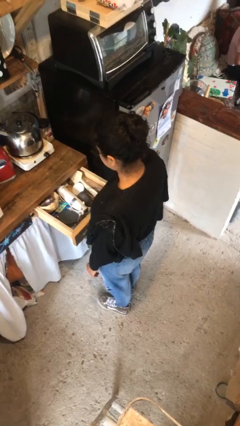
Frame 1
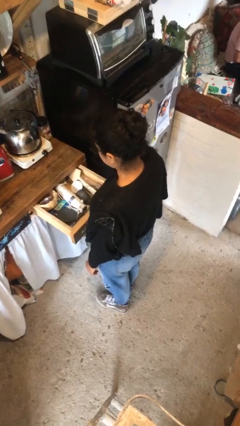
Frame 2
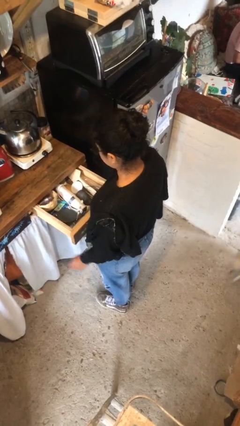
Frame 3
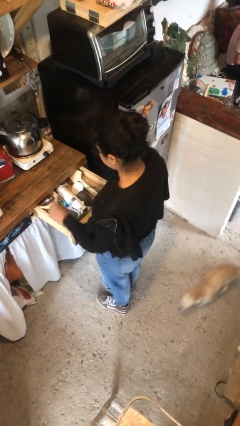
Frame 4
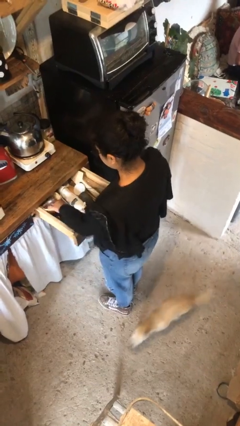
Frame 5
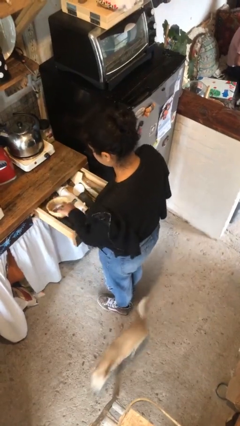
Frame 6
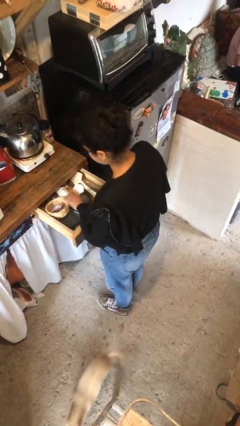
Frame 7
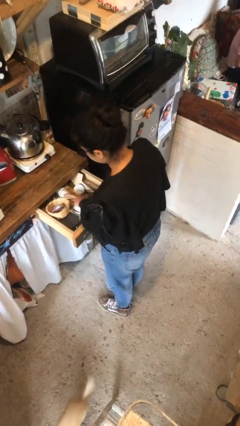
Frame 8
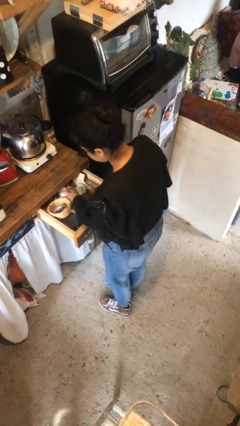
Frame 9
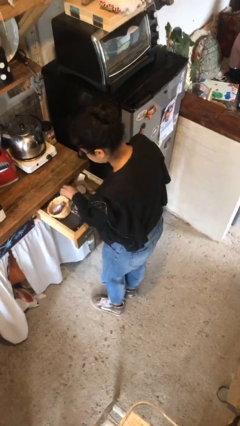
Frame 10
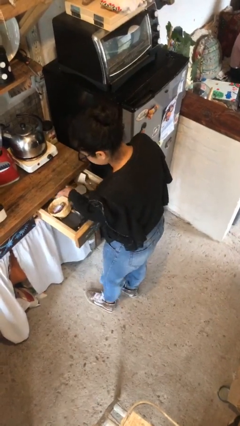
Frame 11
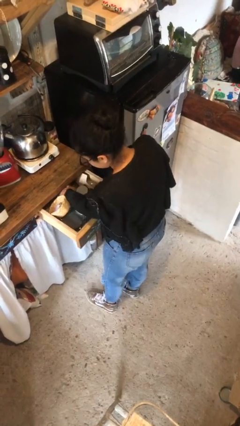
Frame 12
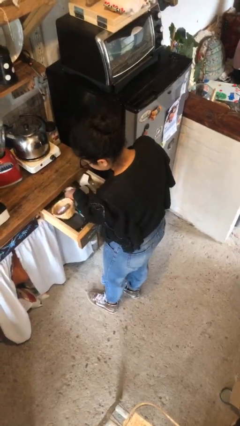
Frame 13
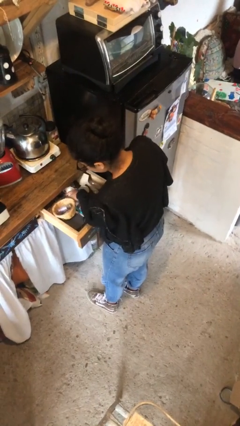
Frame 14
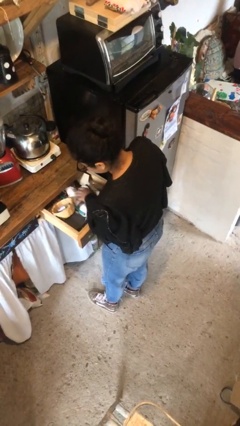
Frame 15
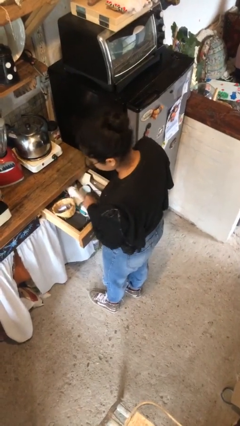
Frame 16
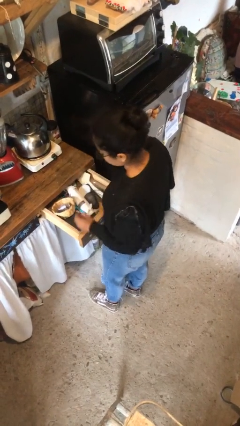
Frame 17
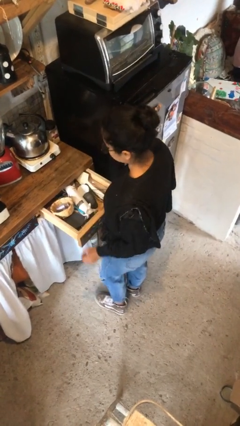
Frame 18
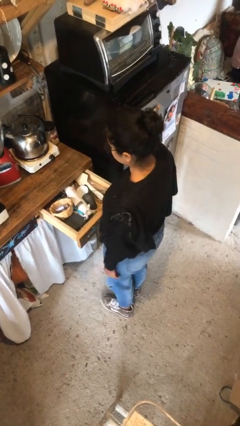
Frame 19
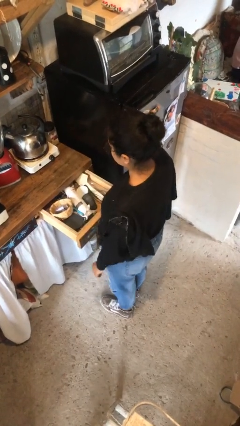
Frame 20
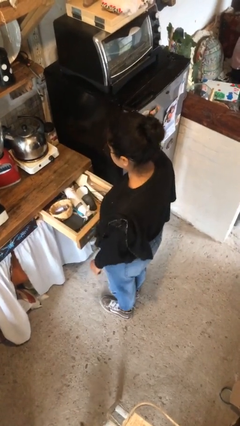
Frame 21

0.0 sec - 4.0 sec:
person searches in kitchen drawer

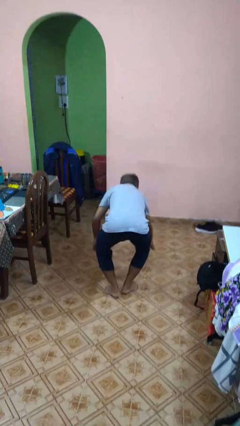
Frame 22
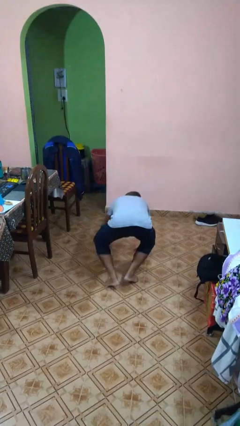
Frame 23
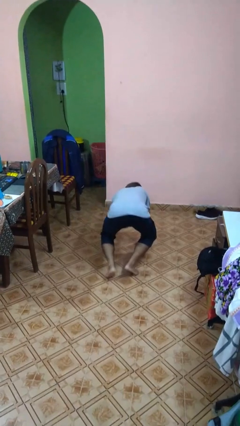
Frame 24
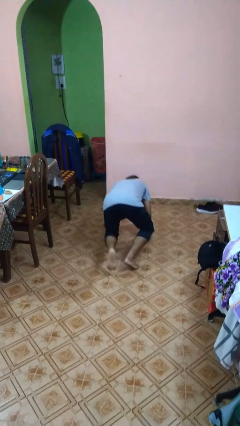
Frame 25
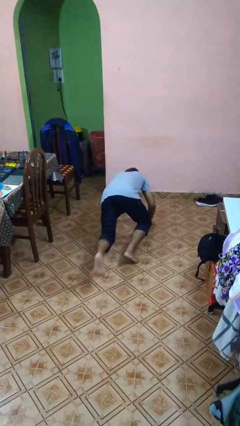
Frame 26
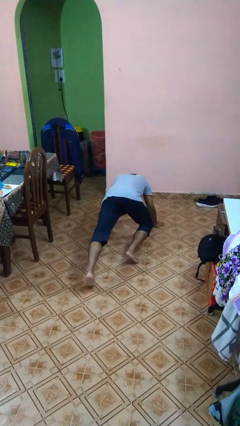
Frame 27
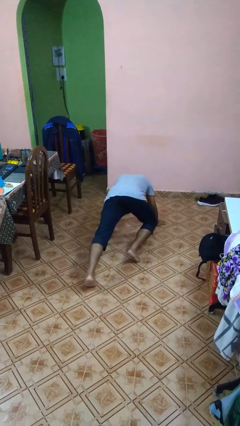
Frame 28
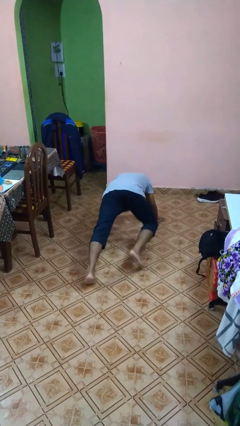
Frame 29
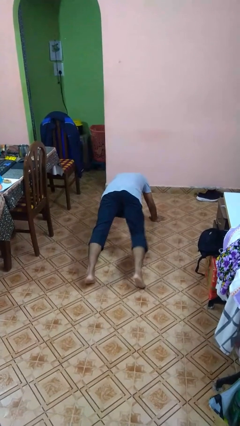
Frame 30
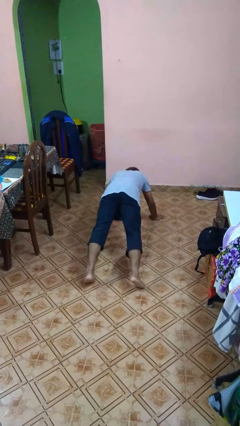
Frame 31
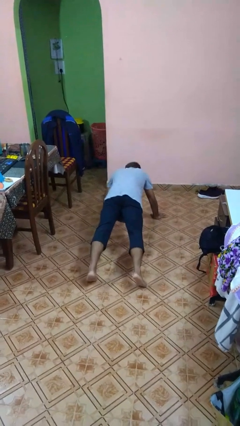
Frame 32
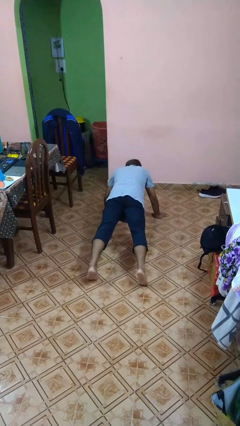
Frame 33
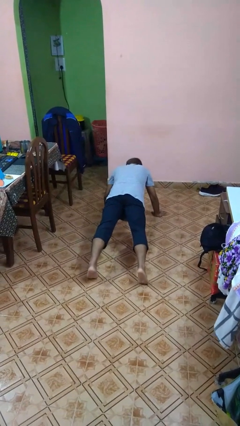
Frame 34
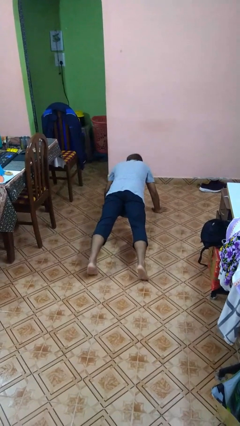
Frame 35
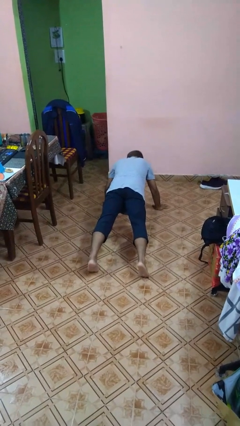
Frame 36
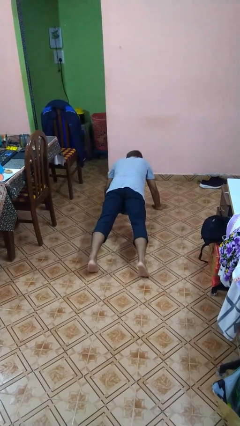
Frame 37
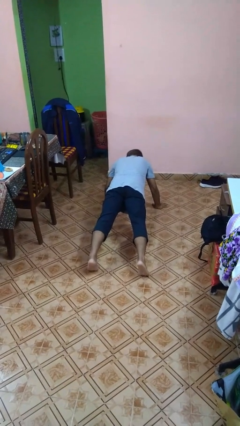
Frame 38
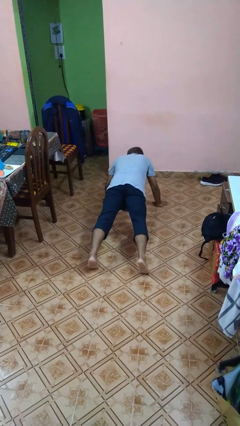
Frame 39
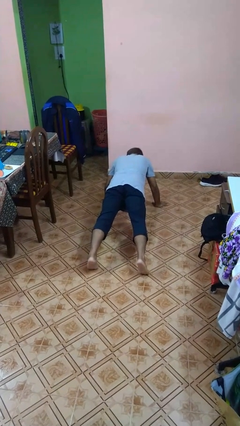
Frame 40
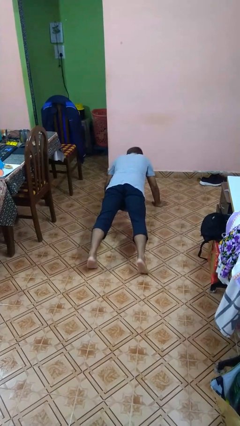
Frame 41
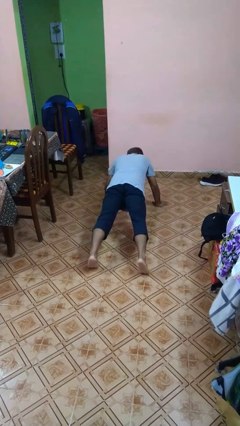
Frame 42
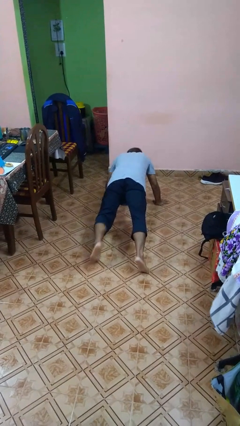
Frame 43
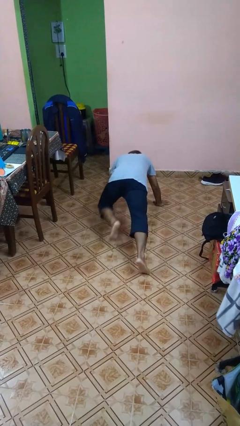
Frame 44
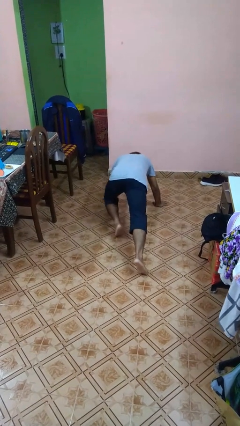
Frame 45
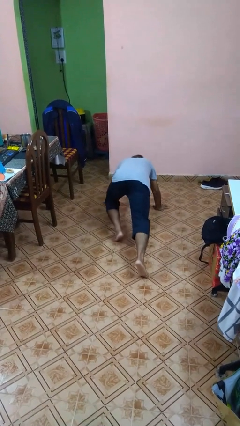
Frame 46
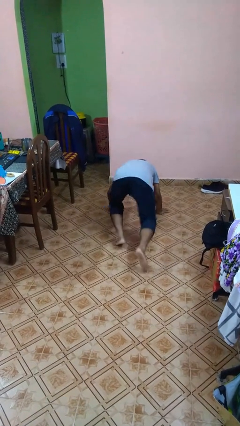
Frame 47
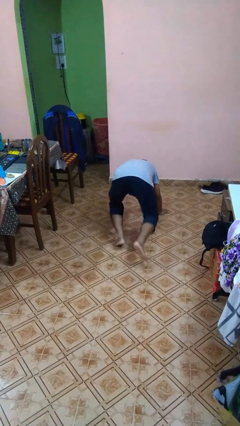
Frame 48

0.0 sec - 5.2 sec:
person exercises with plank

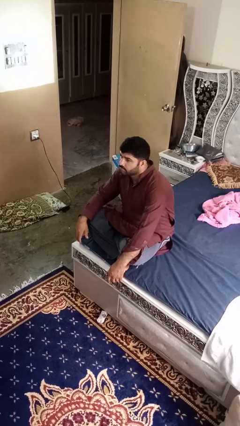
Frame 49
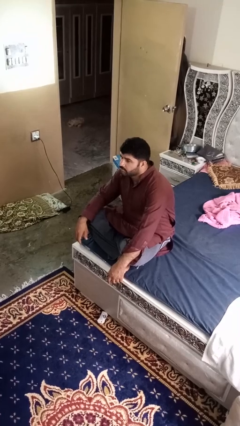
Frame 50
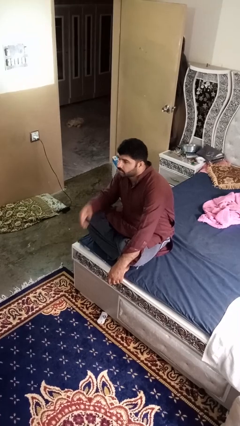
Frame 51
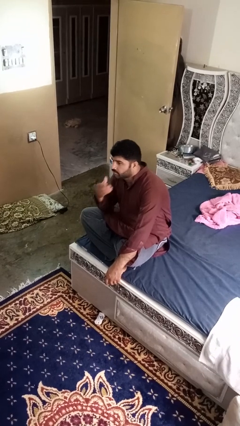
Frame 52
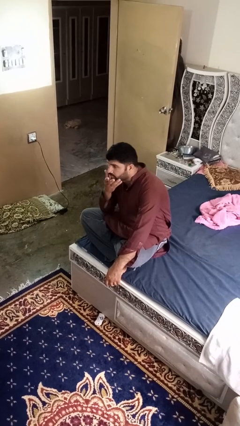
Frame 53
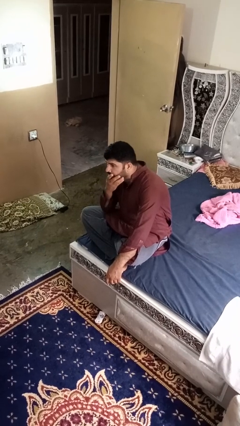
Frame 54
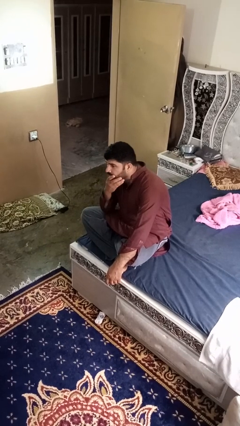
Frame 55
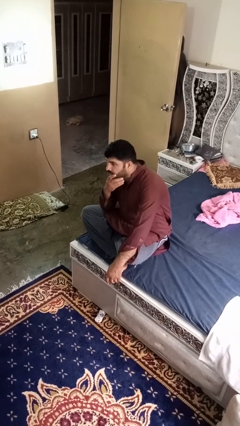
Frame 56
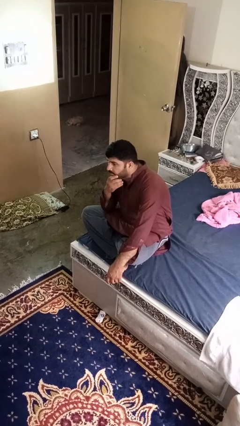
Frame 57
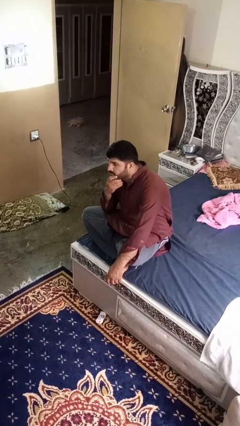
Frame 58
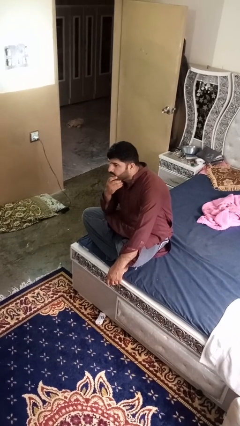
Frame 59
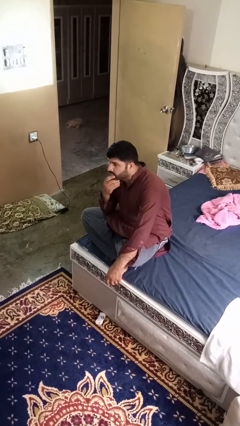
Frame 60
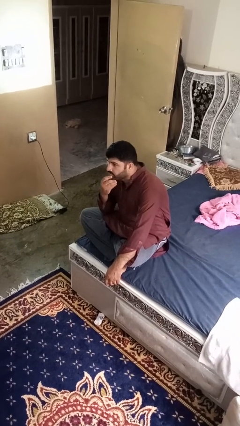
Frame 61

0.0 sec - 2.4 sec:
person strokes chin

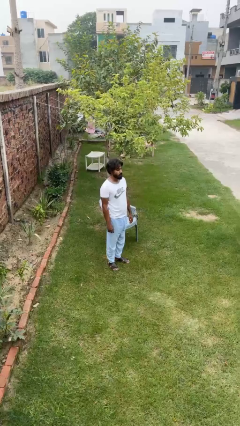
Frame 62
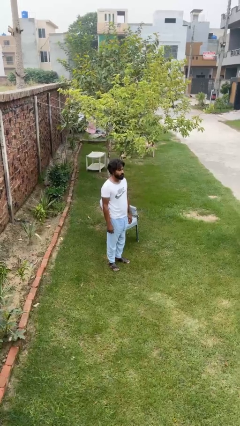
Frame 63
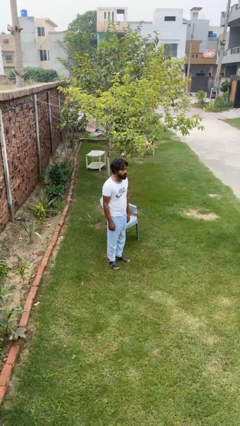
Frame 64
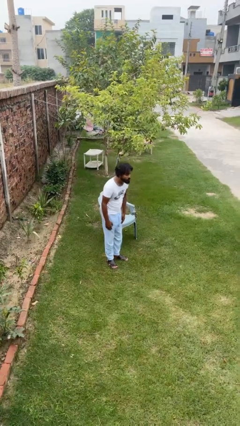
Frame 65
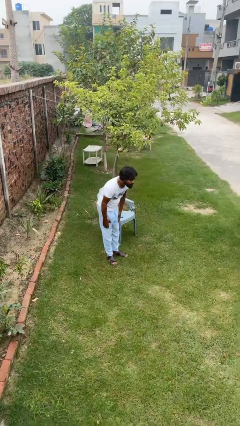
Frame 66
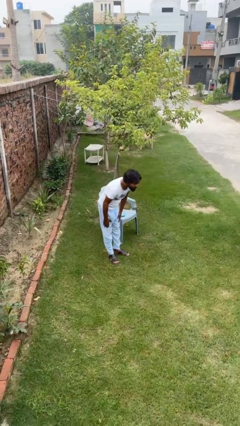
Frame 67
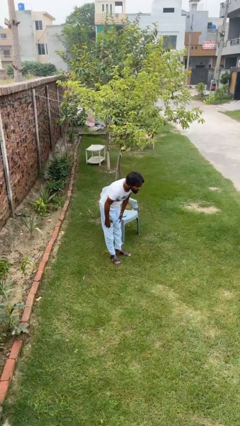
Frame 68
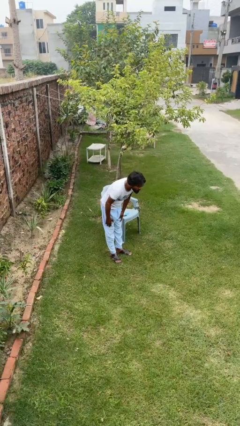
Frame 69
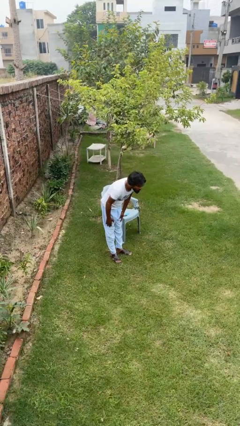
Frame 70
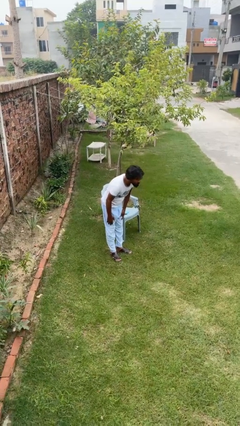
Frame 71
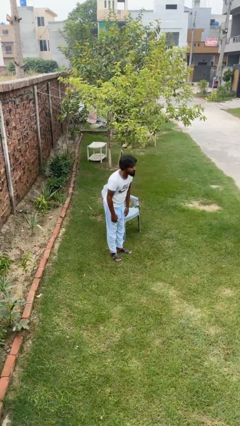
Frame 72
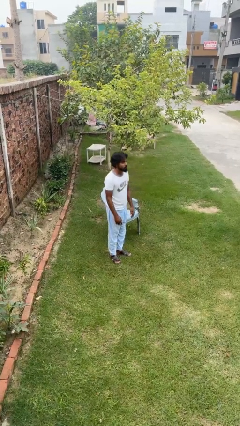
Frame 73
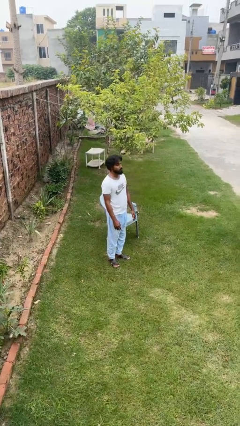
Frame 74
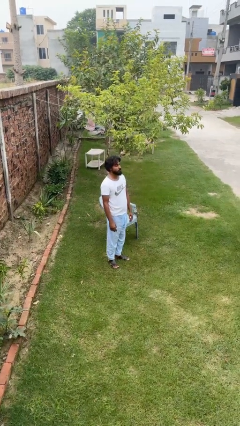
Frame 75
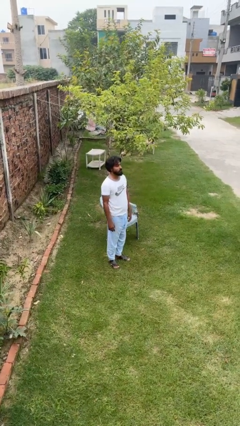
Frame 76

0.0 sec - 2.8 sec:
person bows

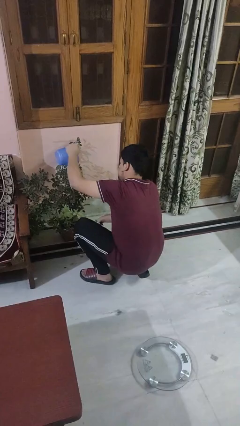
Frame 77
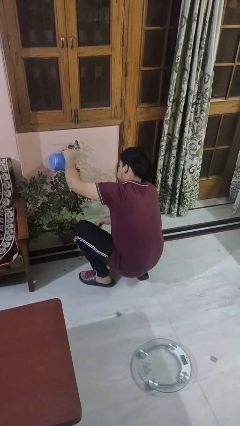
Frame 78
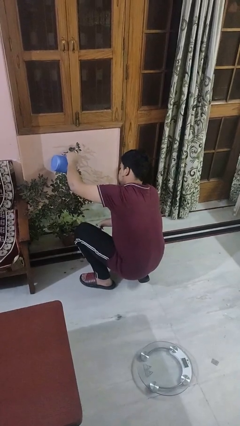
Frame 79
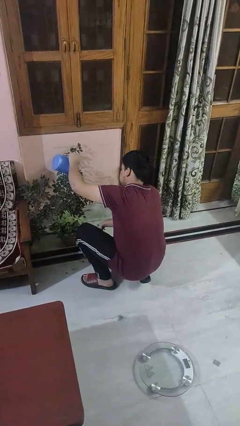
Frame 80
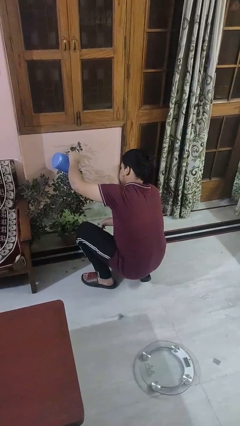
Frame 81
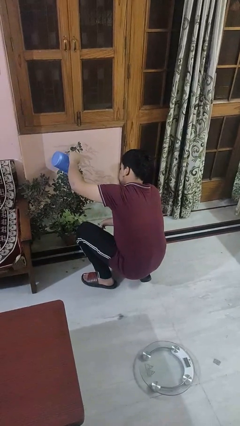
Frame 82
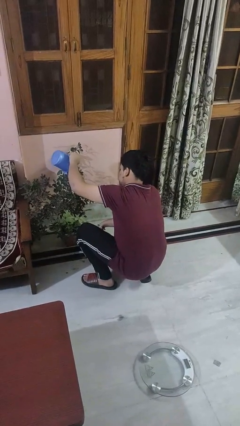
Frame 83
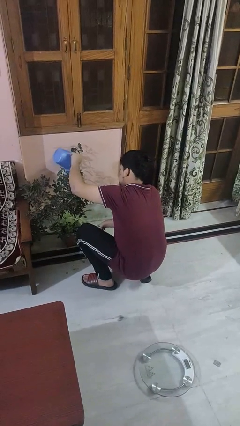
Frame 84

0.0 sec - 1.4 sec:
person waters houseplant

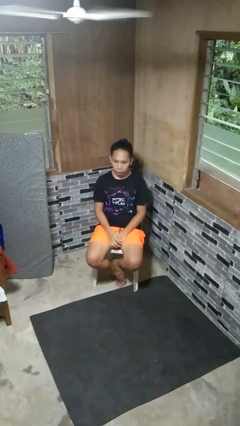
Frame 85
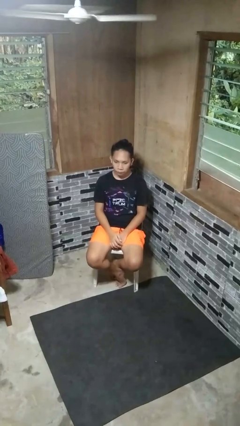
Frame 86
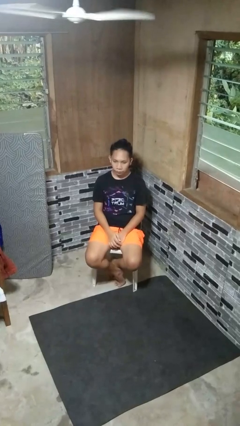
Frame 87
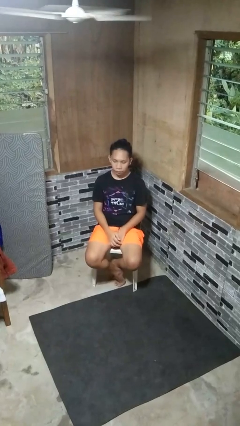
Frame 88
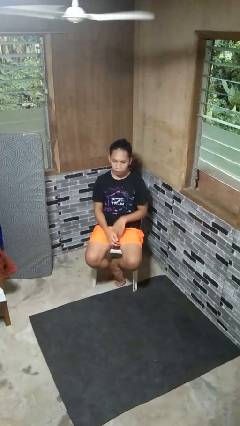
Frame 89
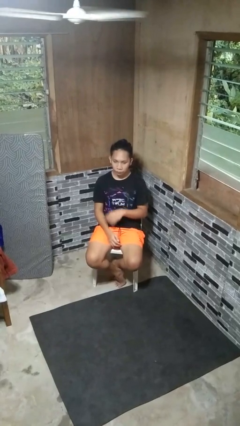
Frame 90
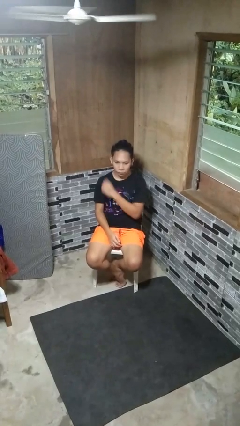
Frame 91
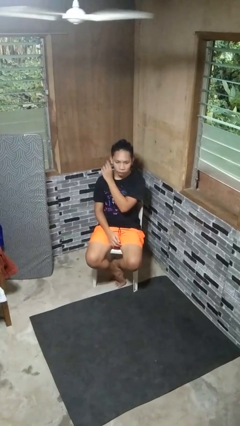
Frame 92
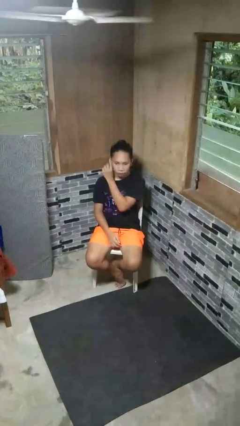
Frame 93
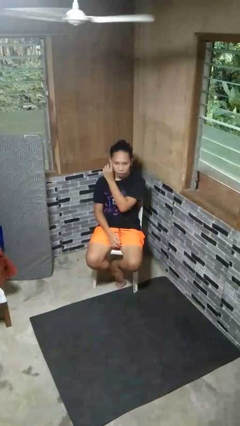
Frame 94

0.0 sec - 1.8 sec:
person touches earlobe
